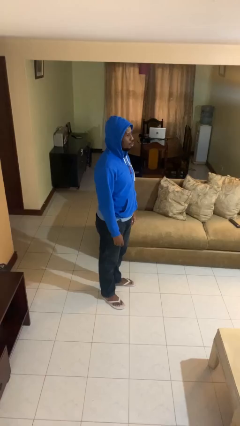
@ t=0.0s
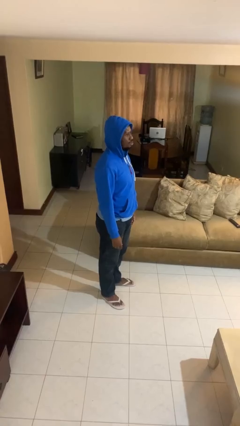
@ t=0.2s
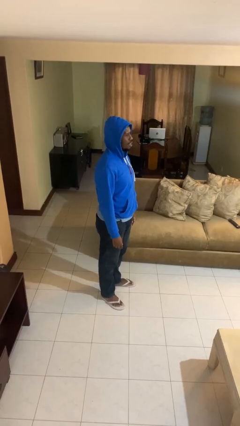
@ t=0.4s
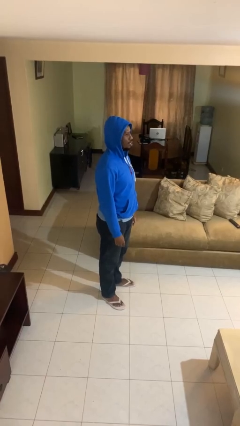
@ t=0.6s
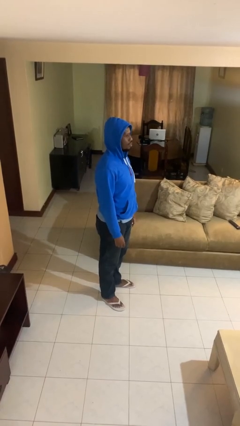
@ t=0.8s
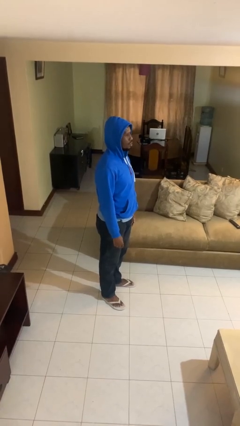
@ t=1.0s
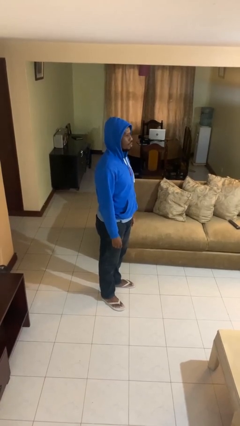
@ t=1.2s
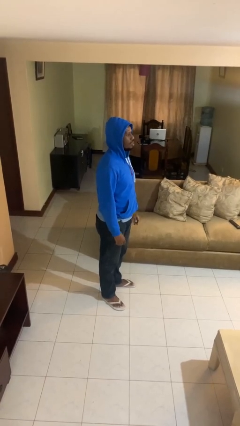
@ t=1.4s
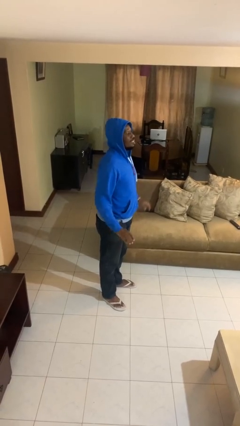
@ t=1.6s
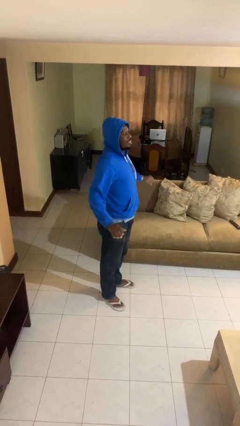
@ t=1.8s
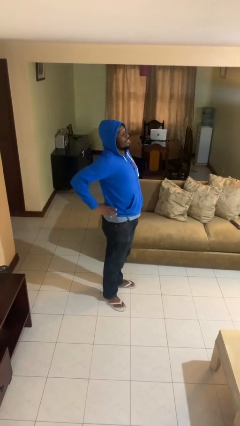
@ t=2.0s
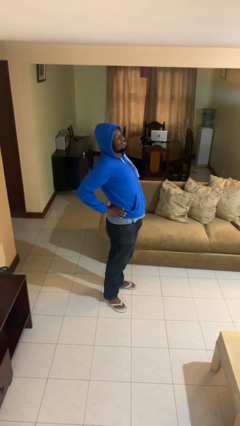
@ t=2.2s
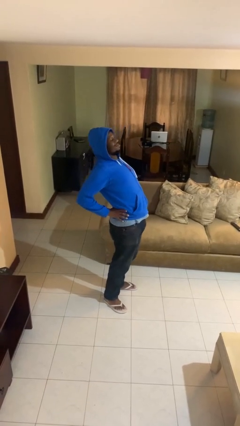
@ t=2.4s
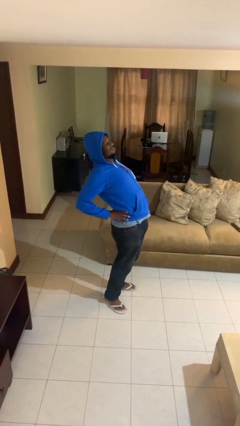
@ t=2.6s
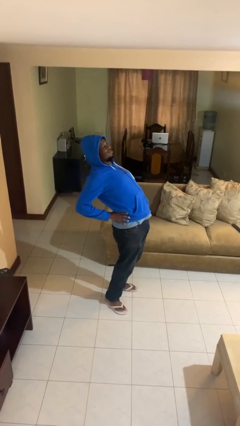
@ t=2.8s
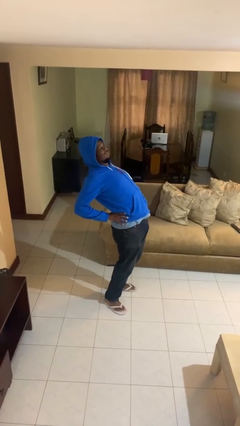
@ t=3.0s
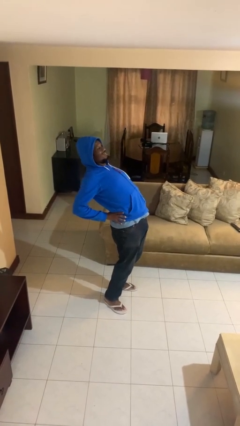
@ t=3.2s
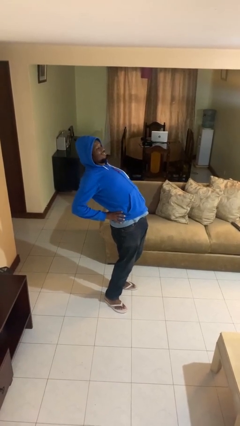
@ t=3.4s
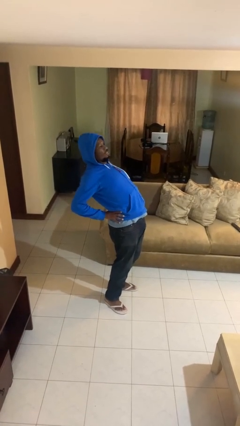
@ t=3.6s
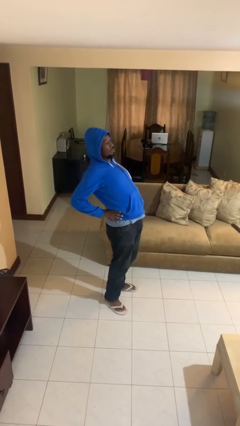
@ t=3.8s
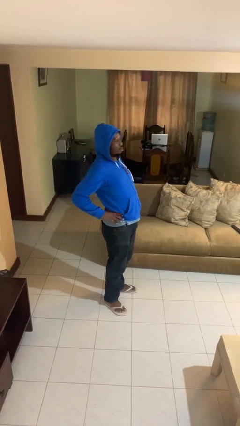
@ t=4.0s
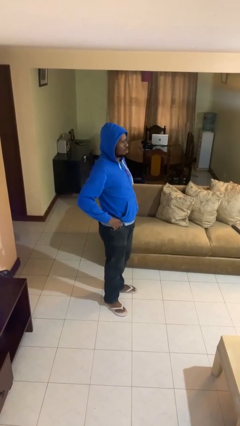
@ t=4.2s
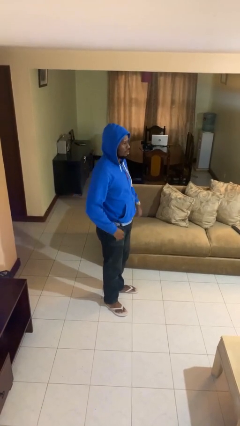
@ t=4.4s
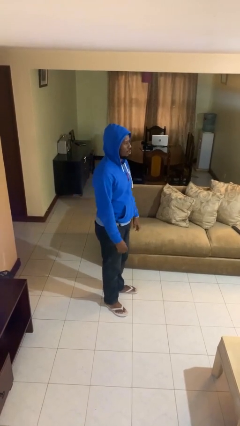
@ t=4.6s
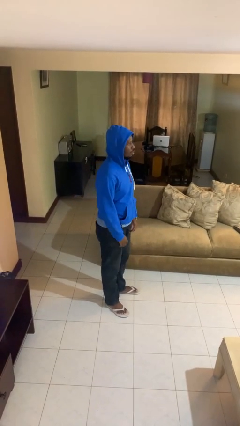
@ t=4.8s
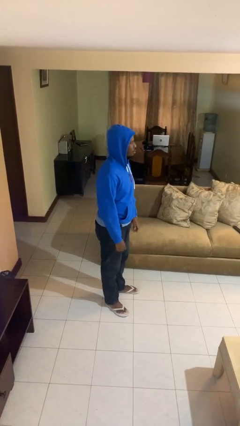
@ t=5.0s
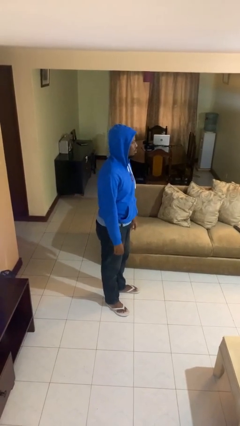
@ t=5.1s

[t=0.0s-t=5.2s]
person stretches back

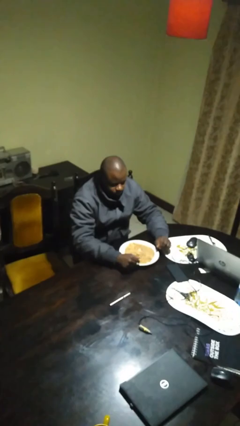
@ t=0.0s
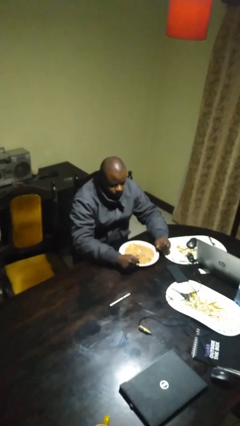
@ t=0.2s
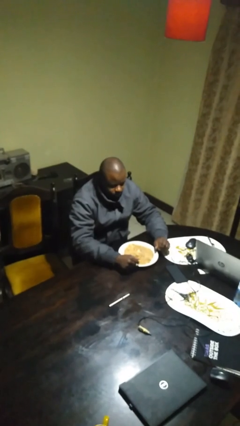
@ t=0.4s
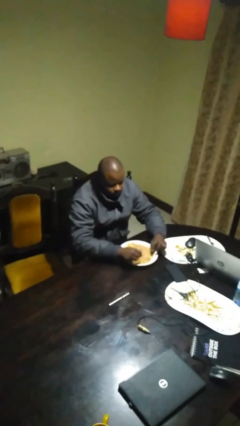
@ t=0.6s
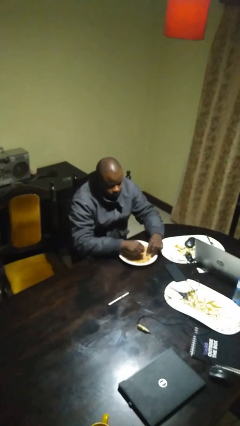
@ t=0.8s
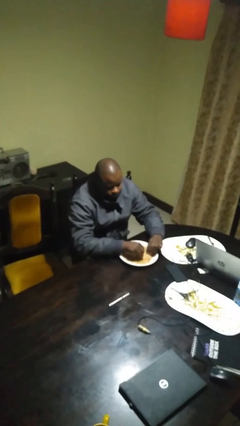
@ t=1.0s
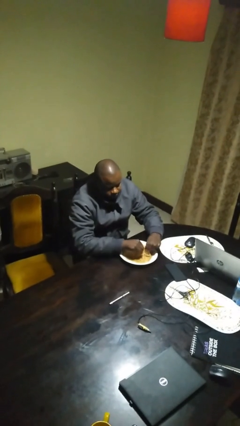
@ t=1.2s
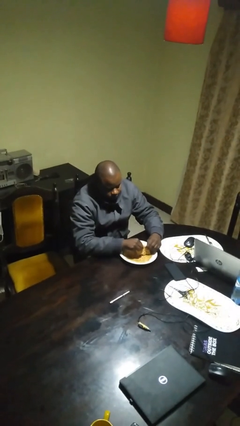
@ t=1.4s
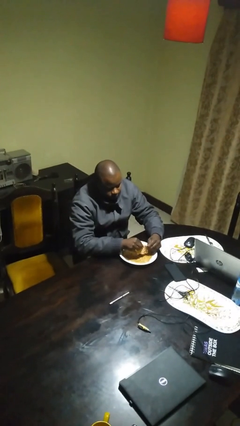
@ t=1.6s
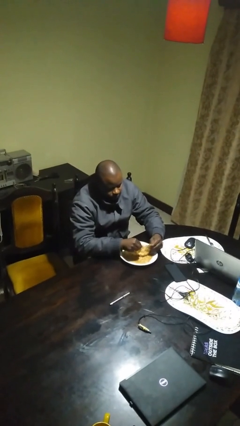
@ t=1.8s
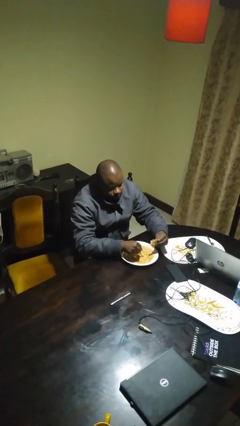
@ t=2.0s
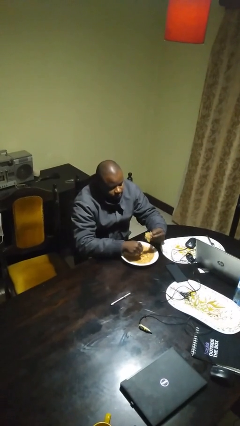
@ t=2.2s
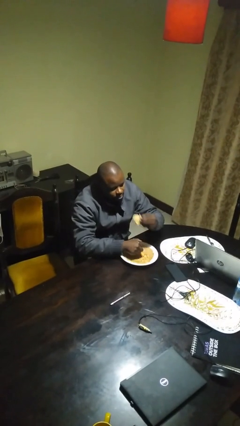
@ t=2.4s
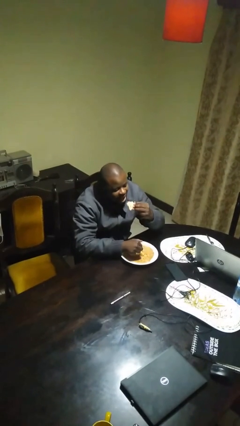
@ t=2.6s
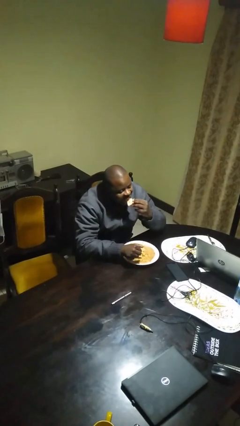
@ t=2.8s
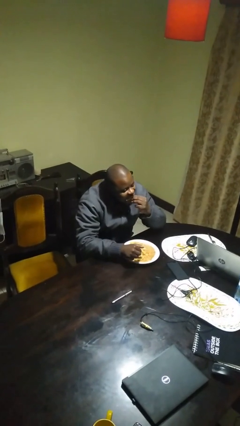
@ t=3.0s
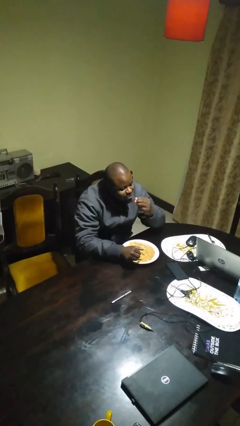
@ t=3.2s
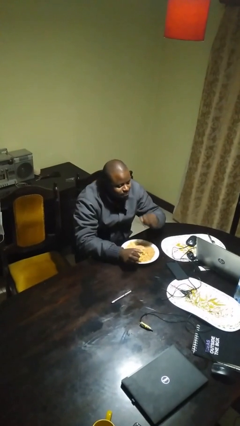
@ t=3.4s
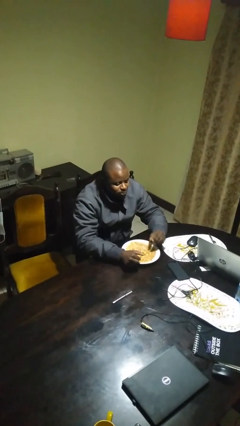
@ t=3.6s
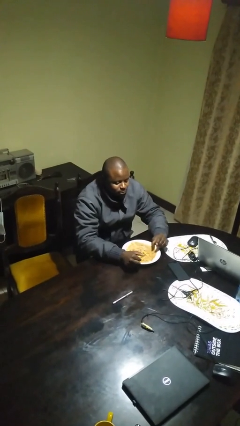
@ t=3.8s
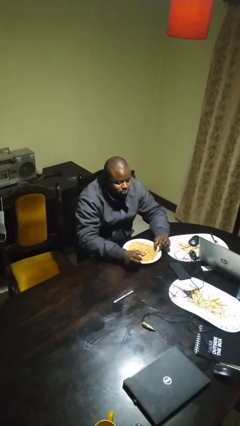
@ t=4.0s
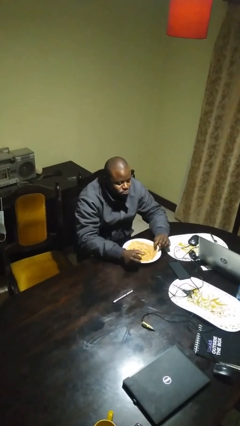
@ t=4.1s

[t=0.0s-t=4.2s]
person eats with hands

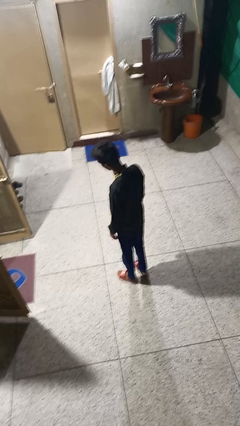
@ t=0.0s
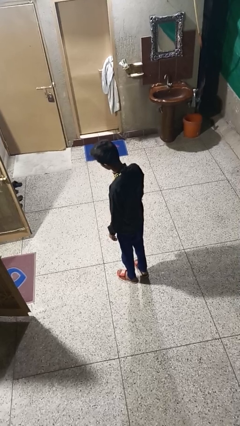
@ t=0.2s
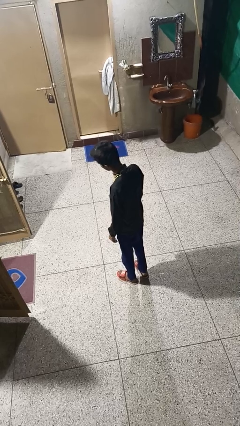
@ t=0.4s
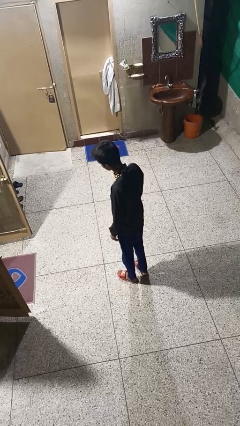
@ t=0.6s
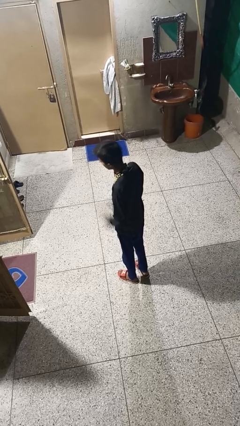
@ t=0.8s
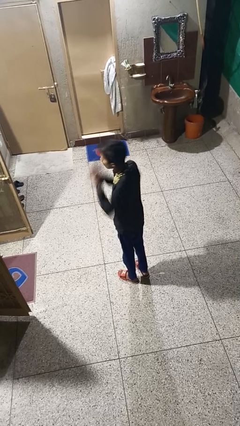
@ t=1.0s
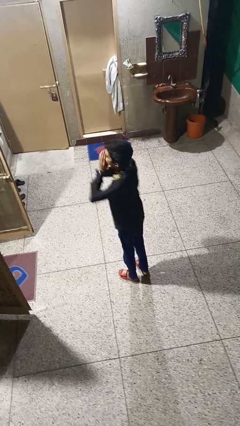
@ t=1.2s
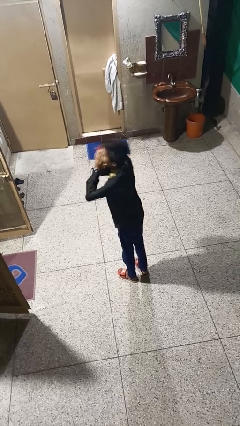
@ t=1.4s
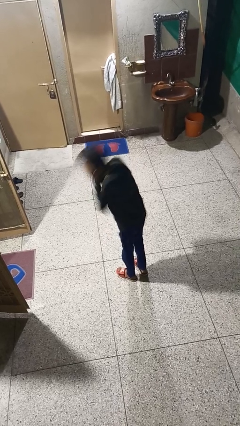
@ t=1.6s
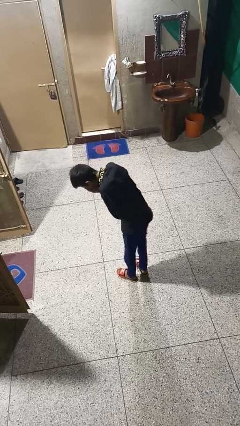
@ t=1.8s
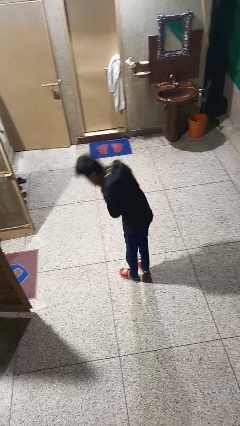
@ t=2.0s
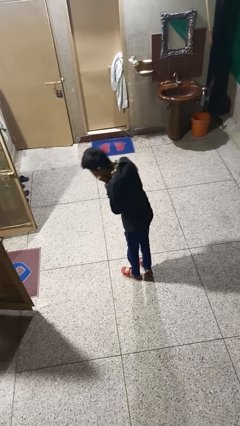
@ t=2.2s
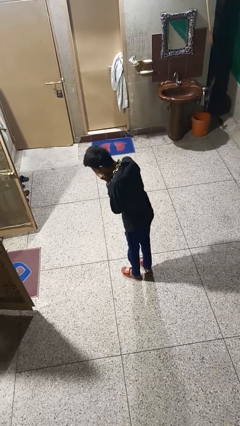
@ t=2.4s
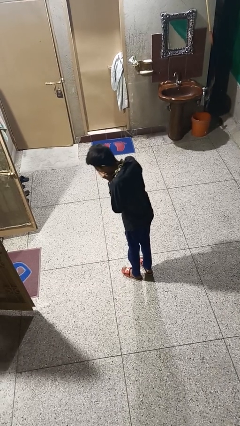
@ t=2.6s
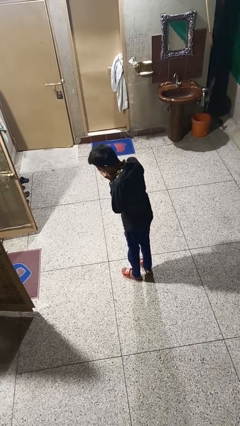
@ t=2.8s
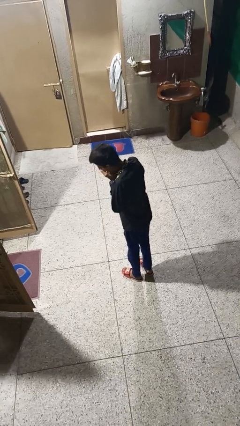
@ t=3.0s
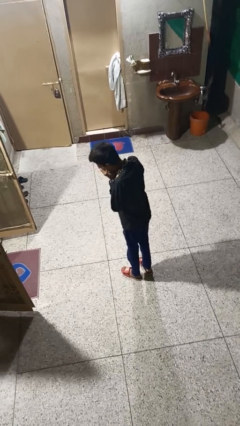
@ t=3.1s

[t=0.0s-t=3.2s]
person sneezes into hand

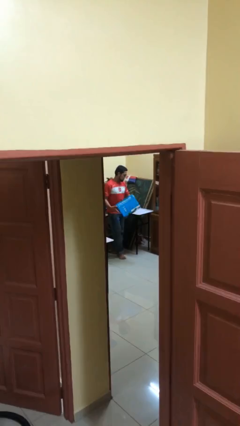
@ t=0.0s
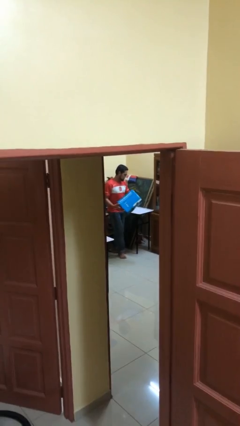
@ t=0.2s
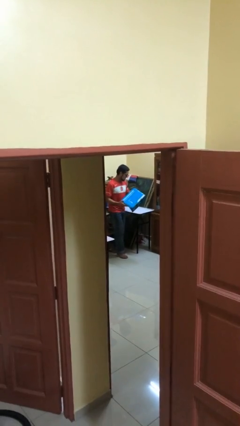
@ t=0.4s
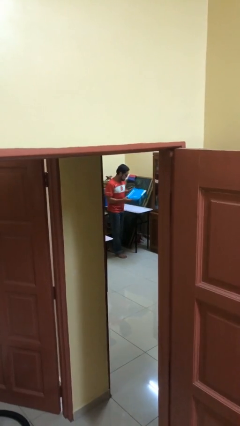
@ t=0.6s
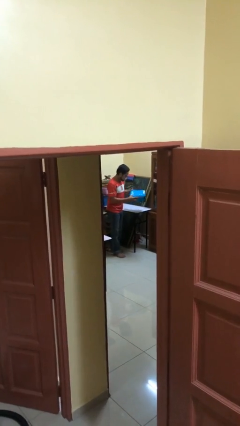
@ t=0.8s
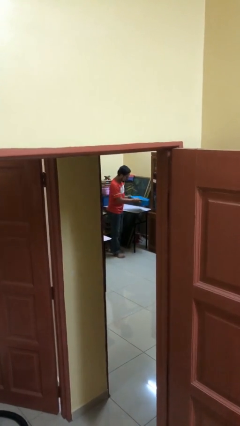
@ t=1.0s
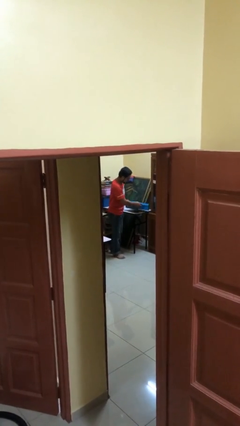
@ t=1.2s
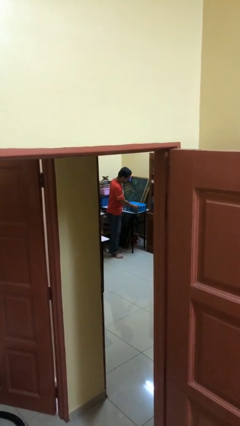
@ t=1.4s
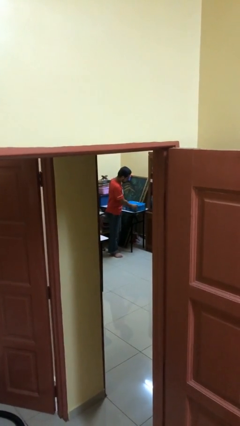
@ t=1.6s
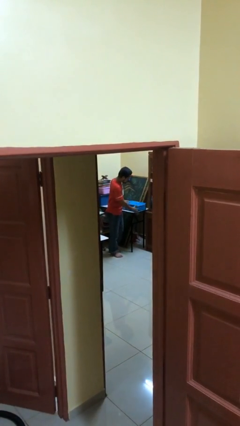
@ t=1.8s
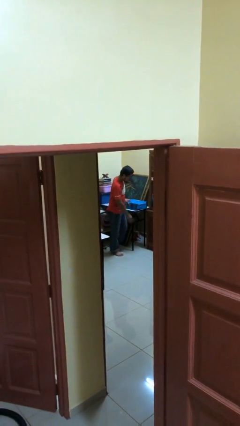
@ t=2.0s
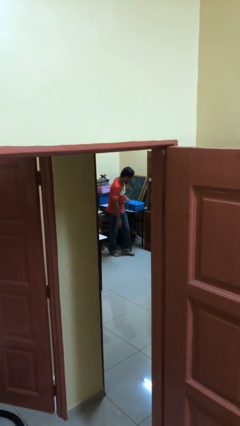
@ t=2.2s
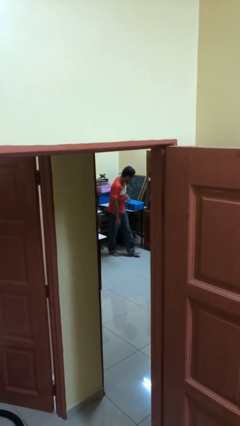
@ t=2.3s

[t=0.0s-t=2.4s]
person puts down object on table

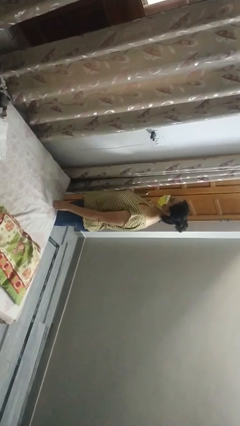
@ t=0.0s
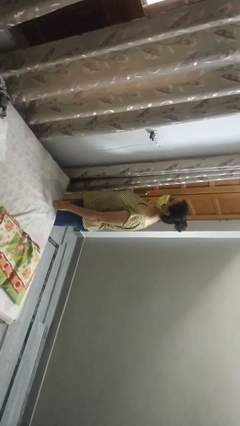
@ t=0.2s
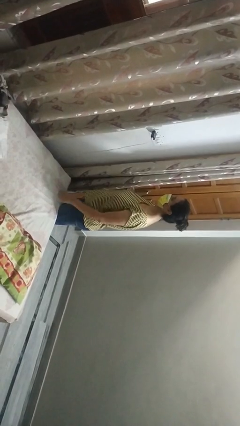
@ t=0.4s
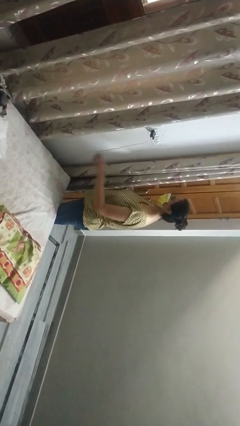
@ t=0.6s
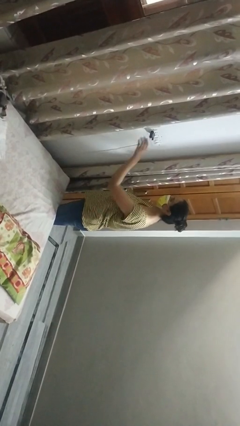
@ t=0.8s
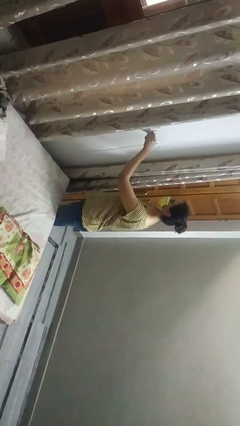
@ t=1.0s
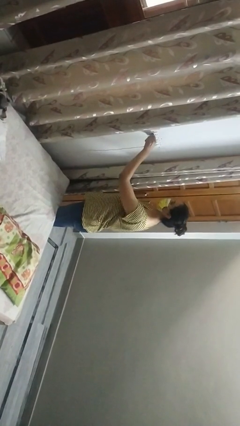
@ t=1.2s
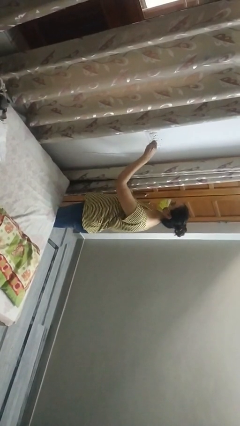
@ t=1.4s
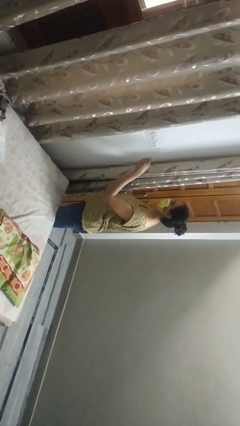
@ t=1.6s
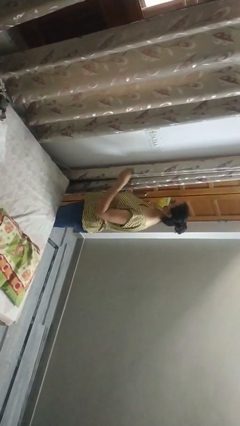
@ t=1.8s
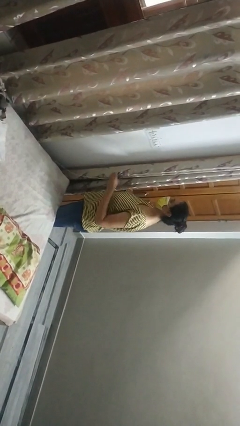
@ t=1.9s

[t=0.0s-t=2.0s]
person unplugs from electrical socket

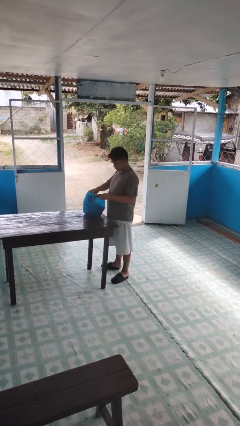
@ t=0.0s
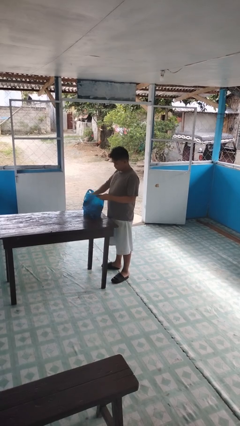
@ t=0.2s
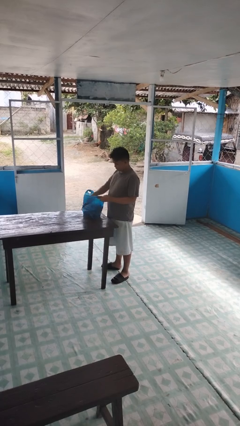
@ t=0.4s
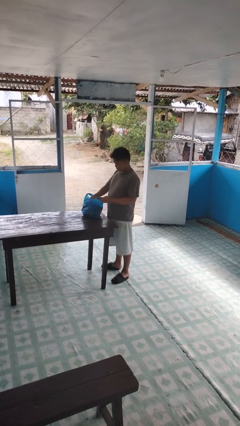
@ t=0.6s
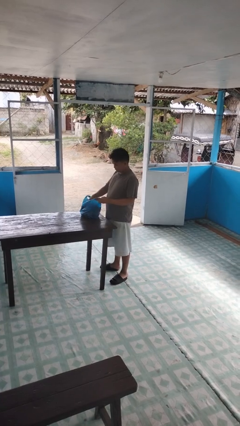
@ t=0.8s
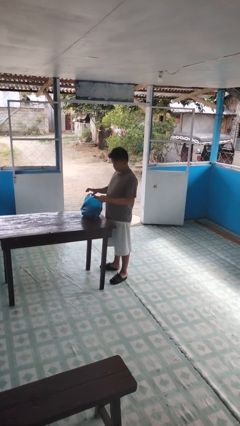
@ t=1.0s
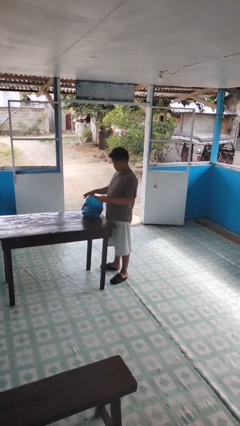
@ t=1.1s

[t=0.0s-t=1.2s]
person puts object into bag
